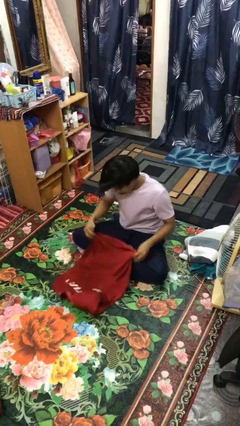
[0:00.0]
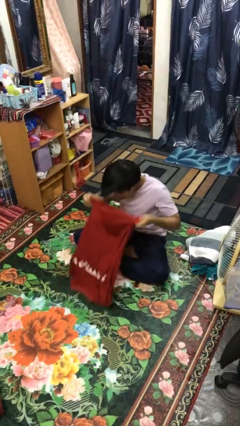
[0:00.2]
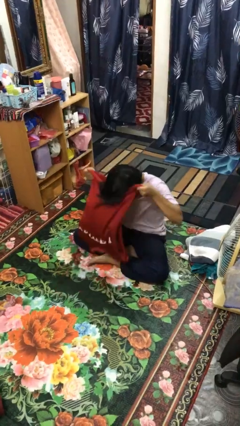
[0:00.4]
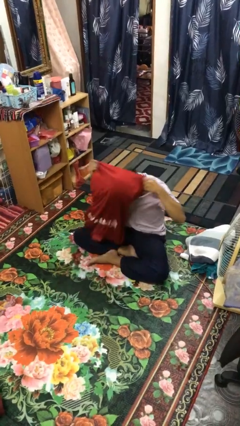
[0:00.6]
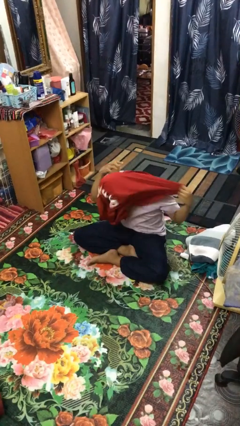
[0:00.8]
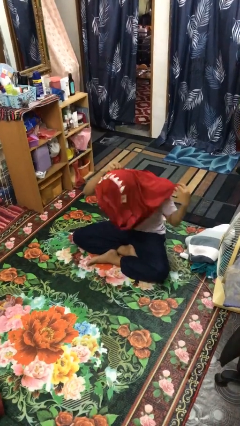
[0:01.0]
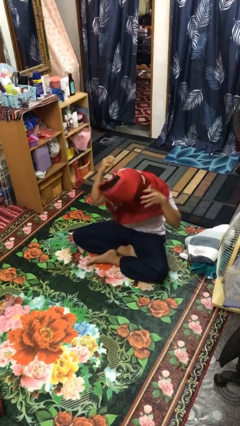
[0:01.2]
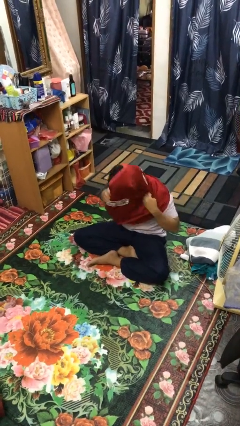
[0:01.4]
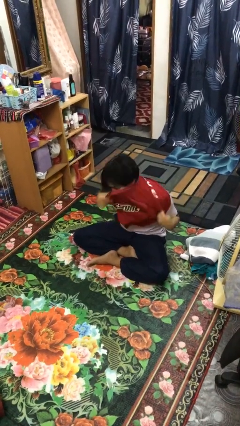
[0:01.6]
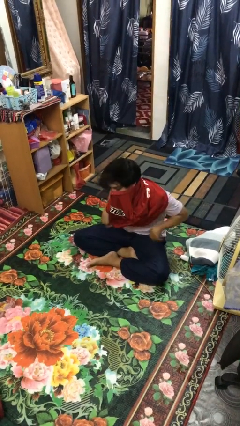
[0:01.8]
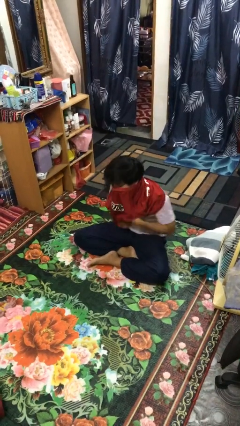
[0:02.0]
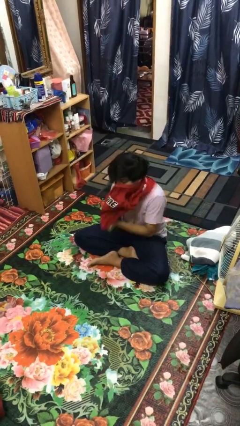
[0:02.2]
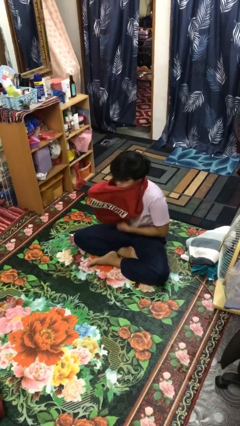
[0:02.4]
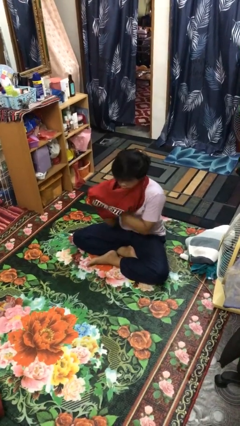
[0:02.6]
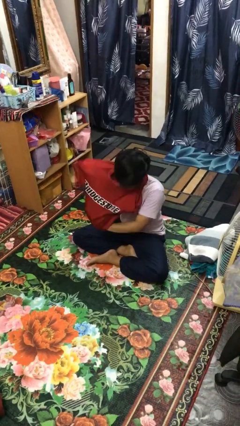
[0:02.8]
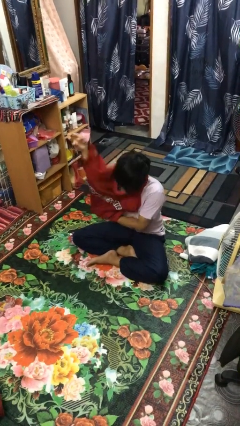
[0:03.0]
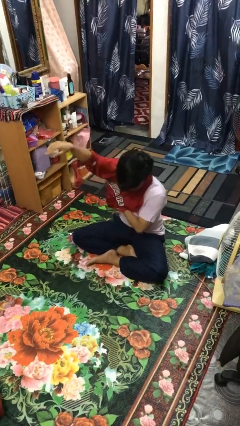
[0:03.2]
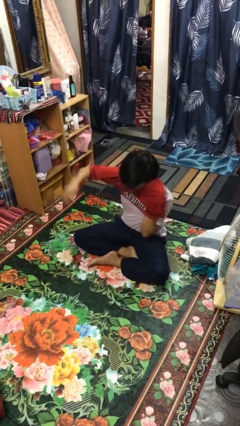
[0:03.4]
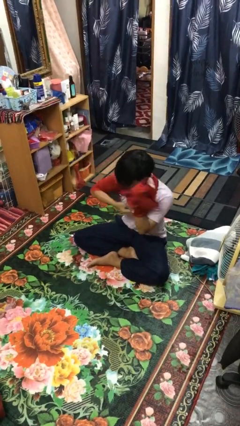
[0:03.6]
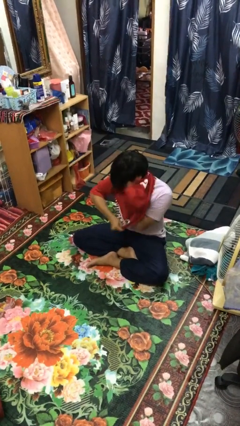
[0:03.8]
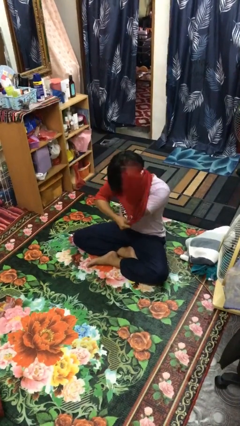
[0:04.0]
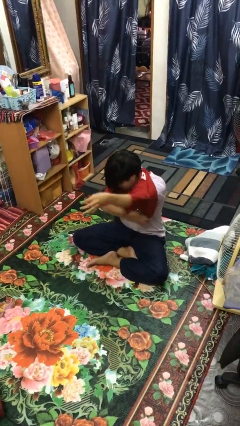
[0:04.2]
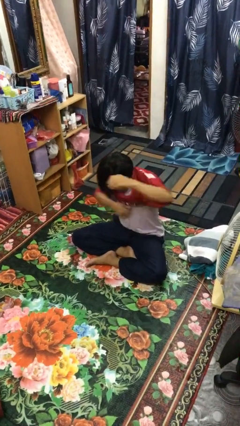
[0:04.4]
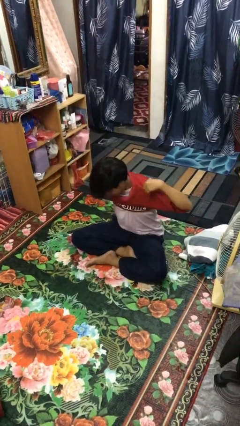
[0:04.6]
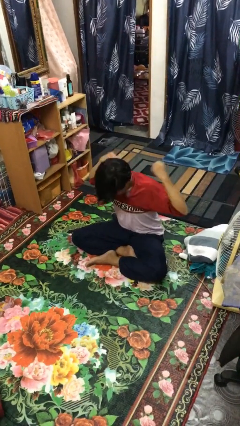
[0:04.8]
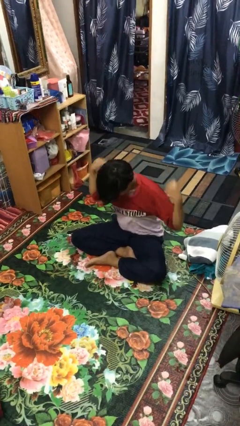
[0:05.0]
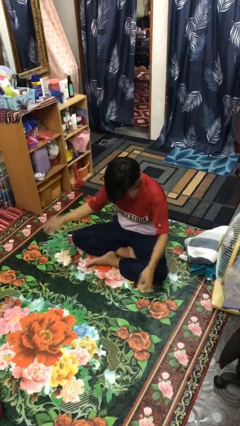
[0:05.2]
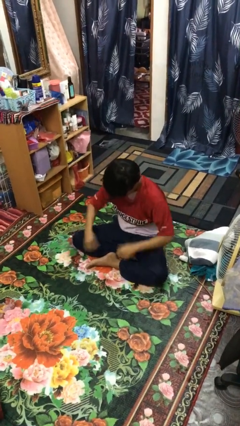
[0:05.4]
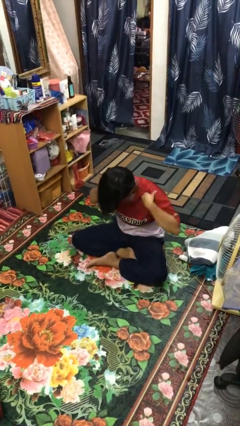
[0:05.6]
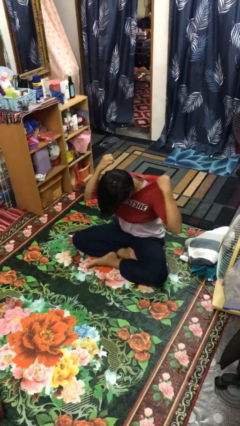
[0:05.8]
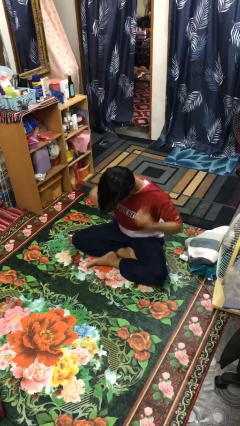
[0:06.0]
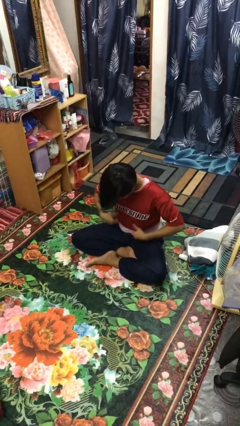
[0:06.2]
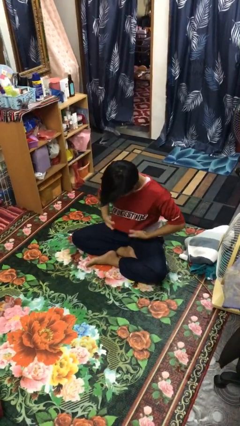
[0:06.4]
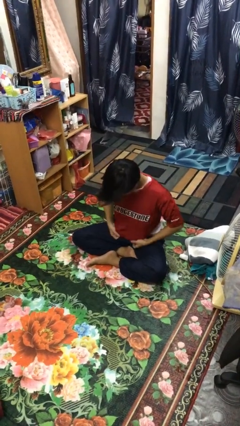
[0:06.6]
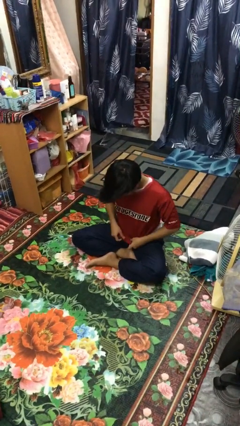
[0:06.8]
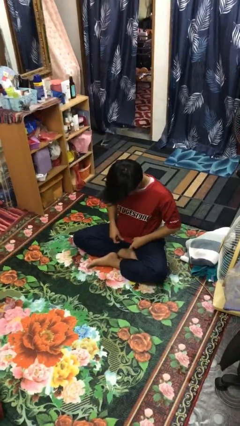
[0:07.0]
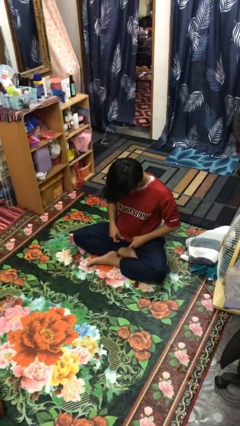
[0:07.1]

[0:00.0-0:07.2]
person puts on shirt

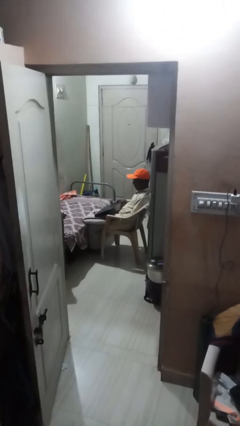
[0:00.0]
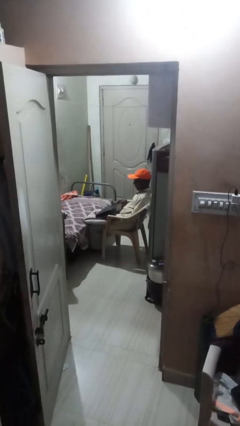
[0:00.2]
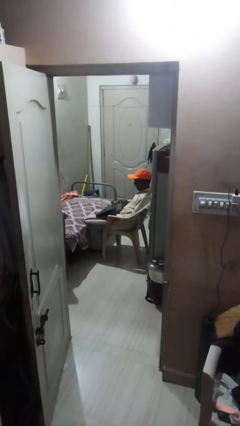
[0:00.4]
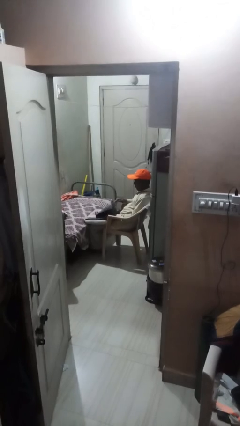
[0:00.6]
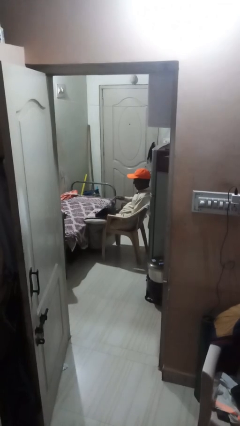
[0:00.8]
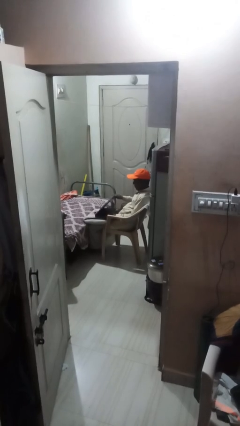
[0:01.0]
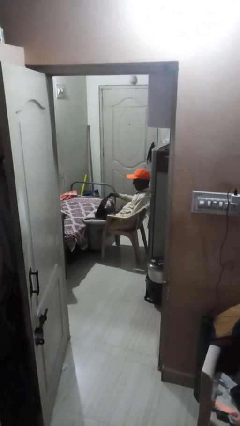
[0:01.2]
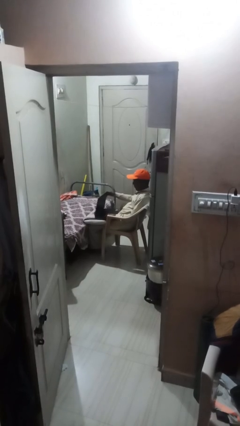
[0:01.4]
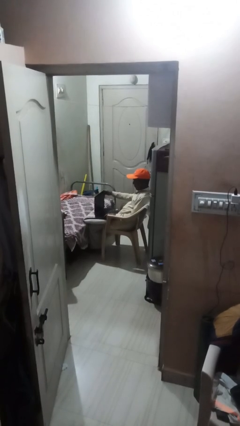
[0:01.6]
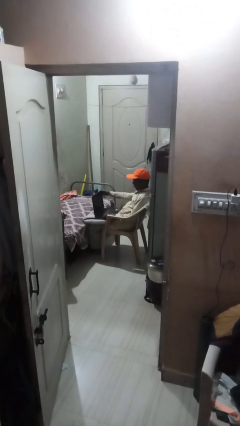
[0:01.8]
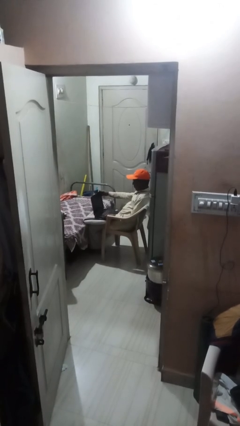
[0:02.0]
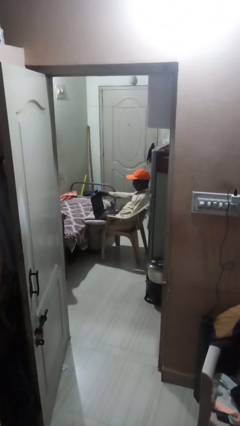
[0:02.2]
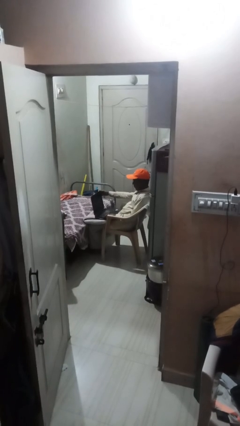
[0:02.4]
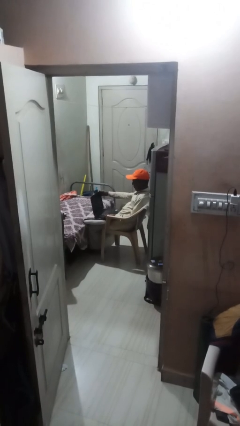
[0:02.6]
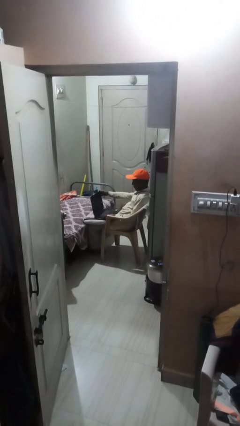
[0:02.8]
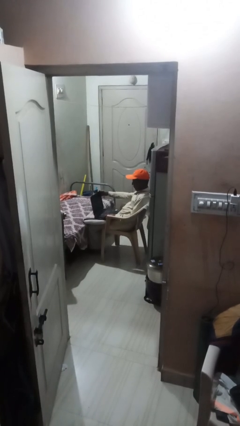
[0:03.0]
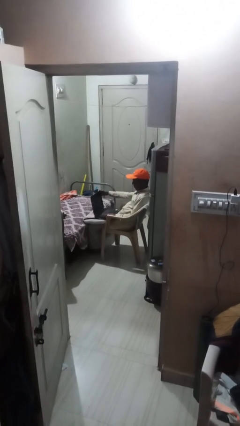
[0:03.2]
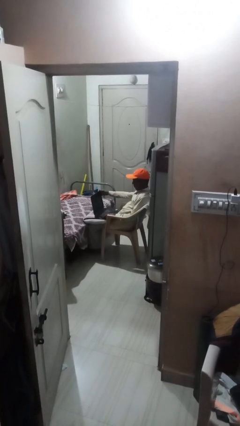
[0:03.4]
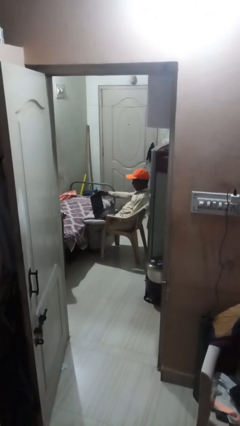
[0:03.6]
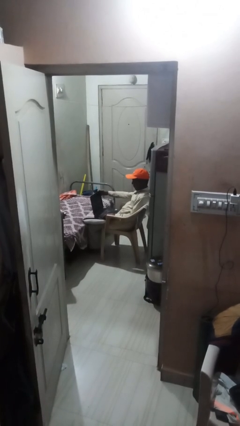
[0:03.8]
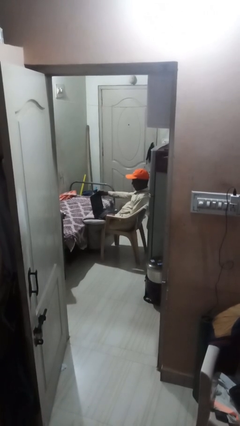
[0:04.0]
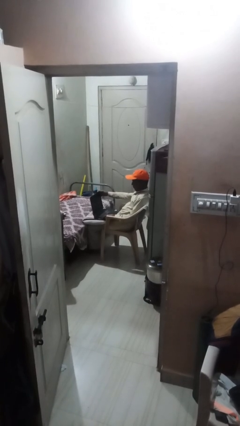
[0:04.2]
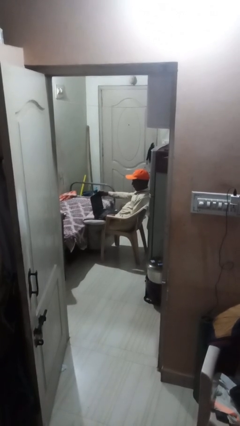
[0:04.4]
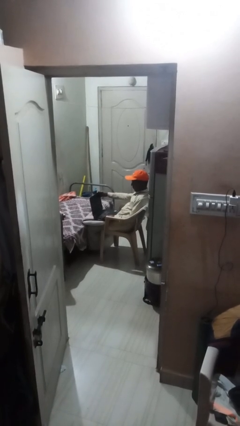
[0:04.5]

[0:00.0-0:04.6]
person interacts with laptop

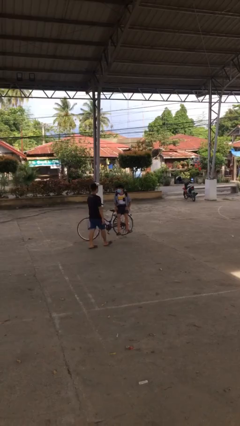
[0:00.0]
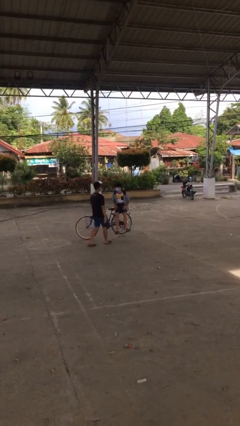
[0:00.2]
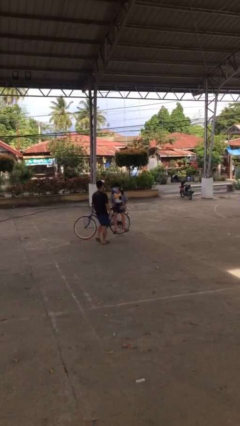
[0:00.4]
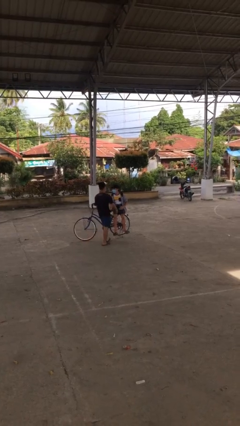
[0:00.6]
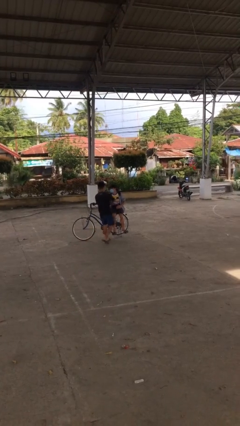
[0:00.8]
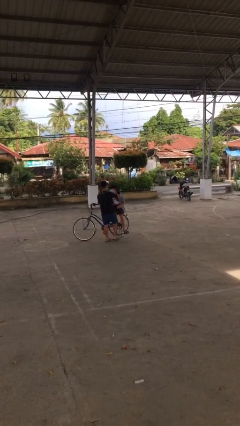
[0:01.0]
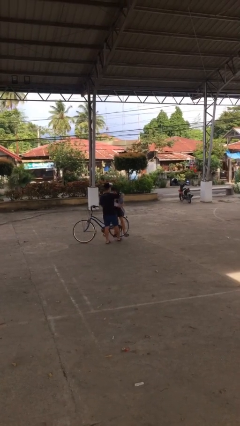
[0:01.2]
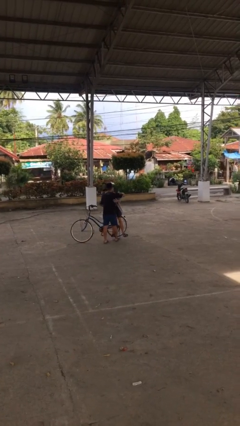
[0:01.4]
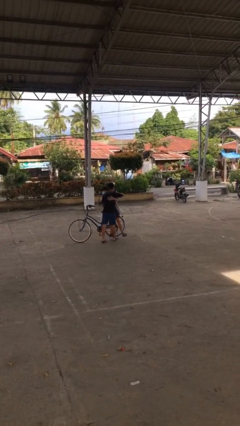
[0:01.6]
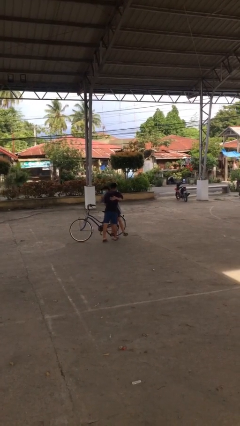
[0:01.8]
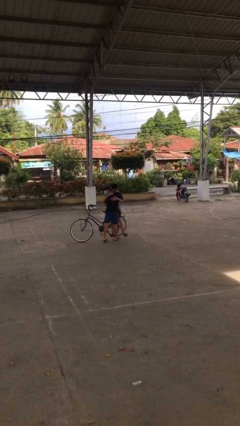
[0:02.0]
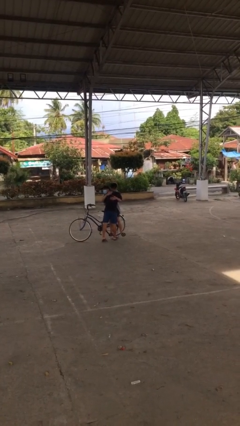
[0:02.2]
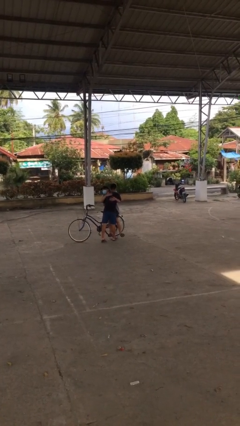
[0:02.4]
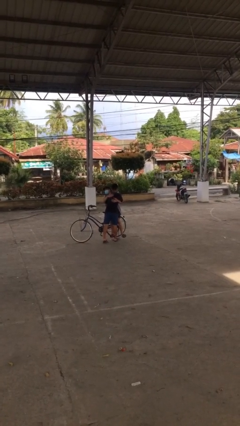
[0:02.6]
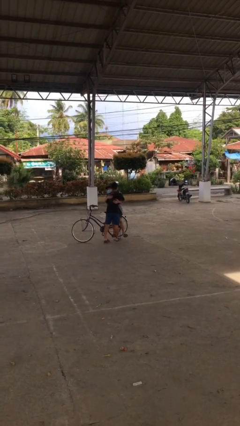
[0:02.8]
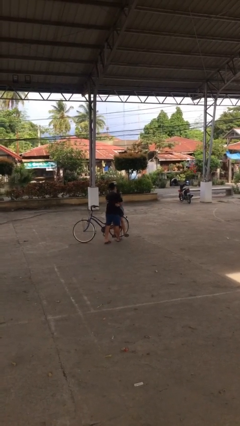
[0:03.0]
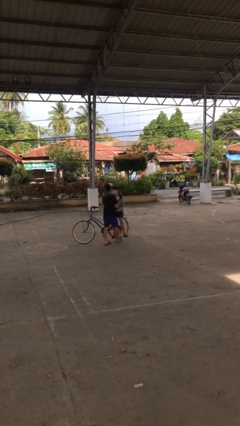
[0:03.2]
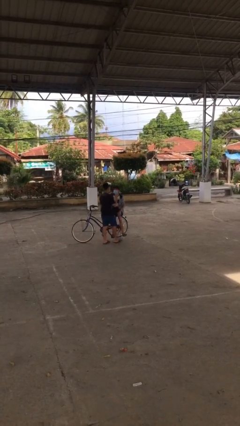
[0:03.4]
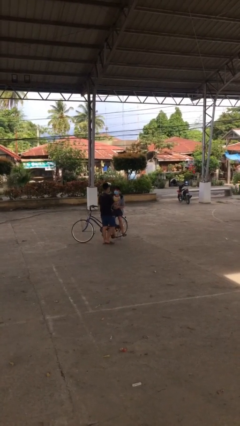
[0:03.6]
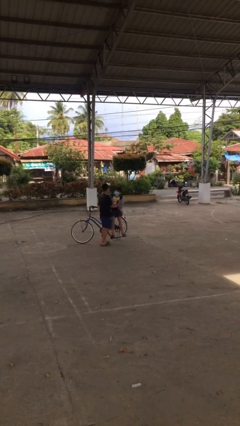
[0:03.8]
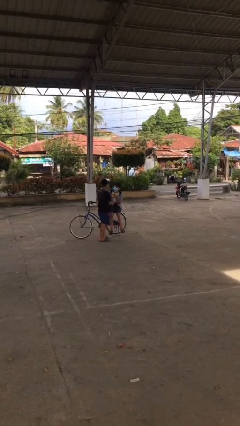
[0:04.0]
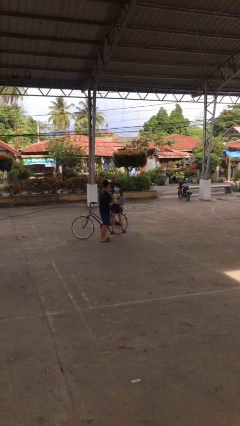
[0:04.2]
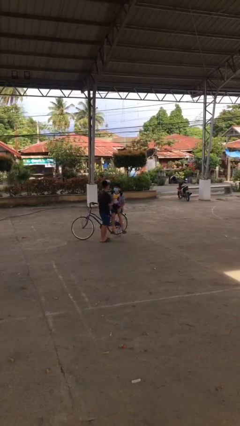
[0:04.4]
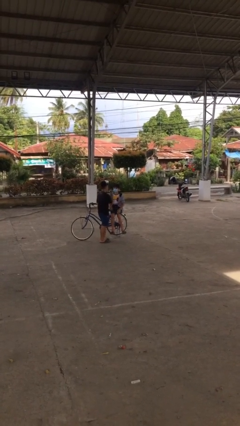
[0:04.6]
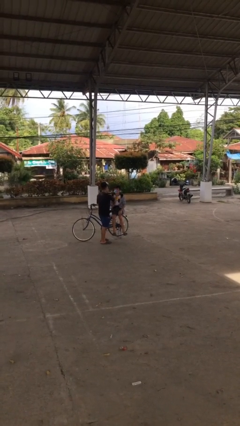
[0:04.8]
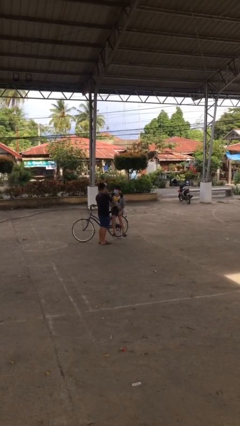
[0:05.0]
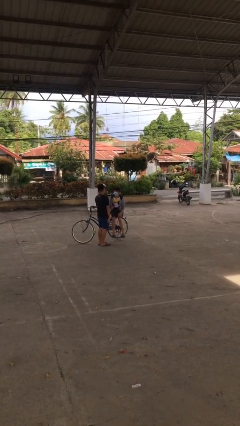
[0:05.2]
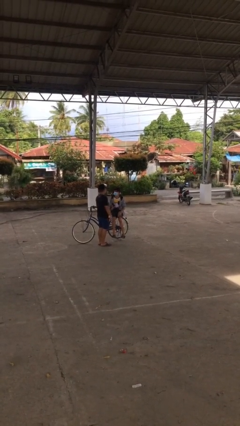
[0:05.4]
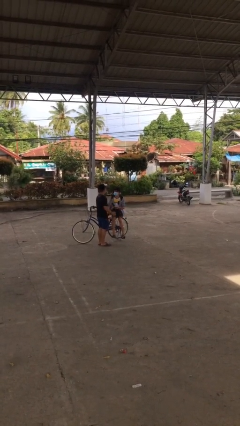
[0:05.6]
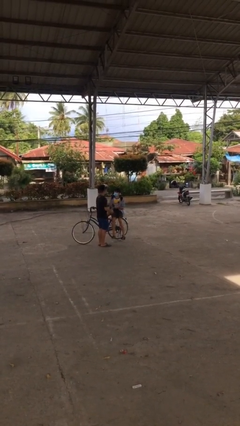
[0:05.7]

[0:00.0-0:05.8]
person embraces person

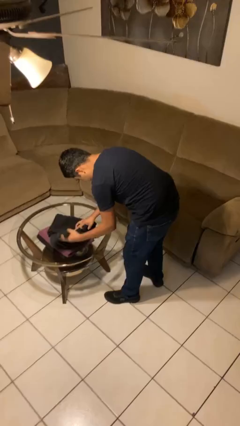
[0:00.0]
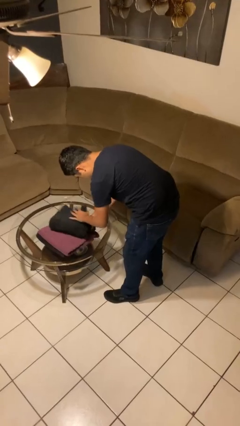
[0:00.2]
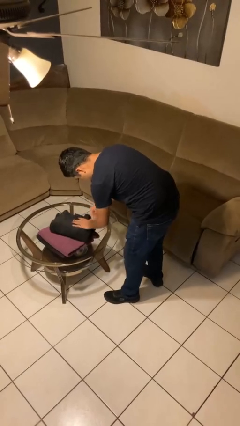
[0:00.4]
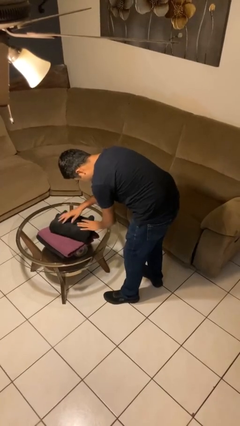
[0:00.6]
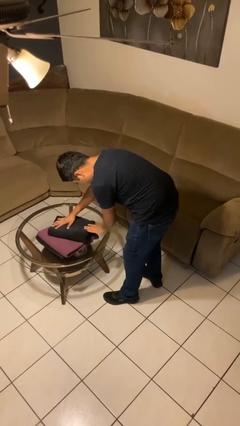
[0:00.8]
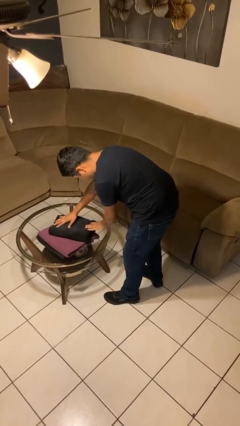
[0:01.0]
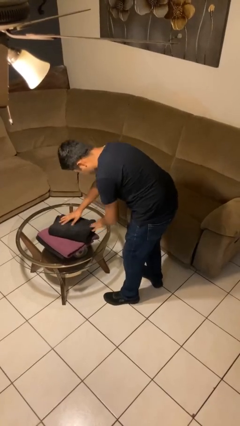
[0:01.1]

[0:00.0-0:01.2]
person folds towel
